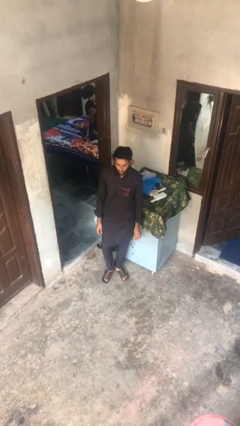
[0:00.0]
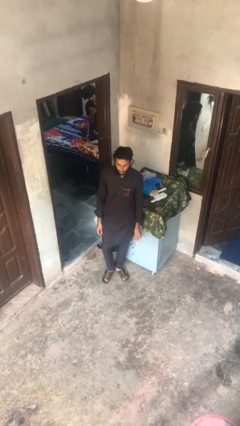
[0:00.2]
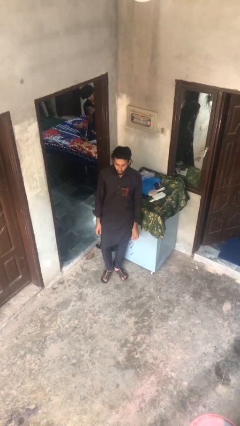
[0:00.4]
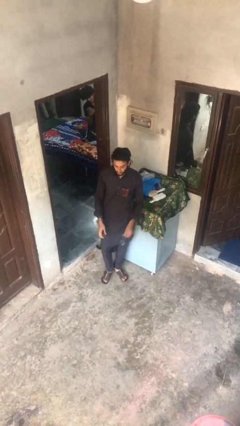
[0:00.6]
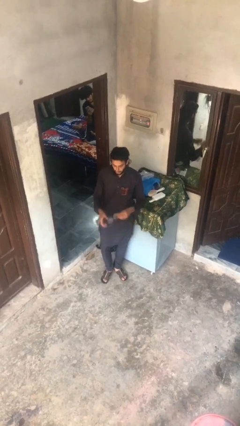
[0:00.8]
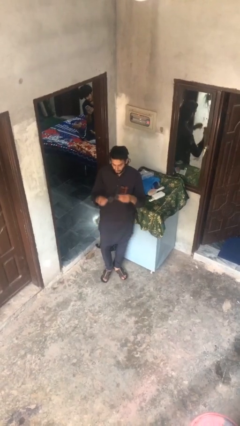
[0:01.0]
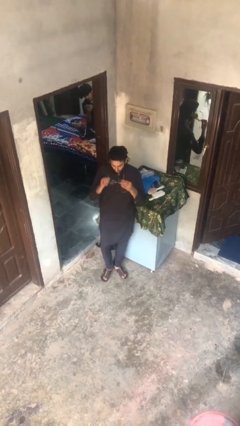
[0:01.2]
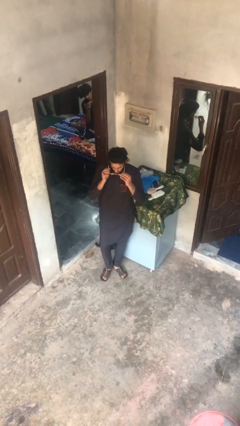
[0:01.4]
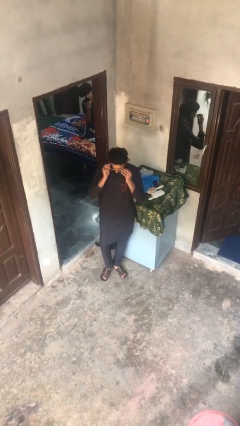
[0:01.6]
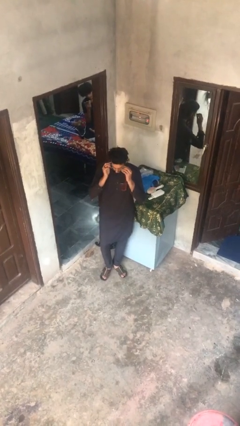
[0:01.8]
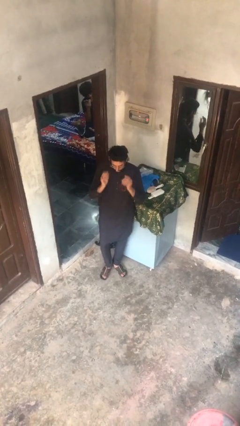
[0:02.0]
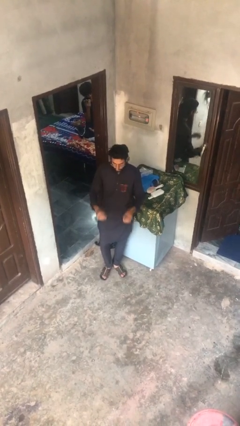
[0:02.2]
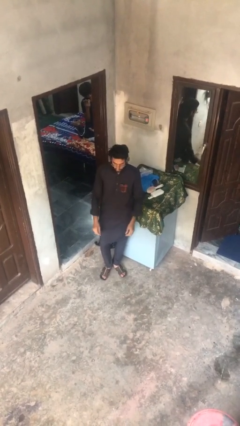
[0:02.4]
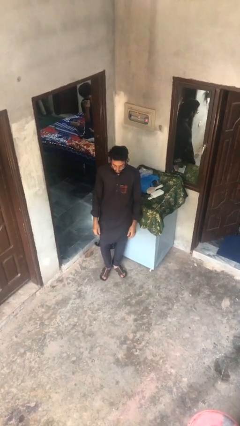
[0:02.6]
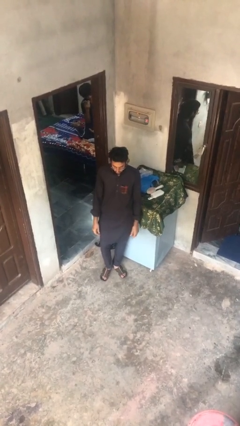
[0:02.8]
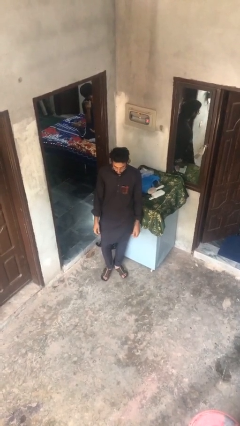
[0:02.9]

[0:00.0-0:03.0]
person puts on glasses

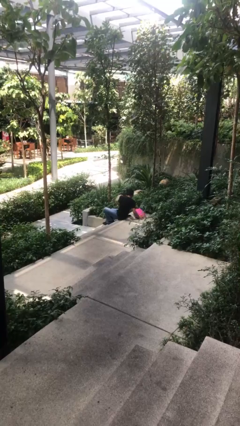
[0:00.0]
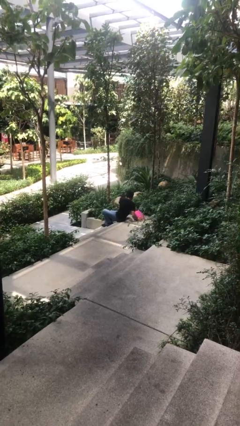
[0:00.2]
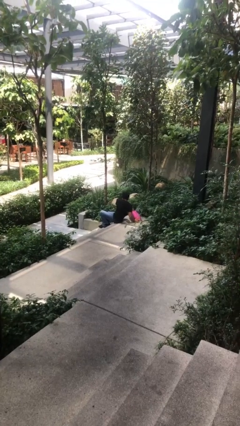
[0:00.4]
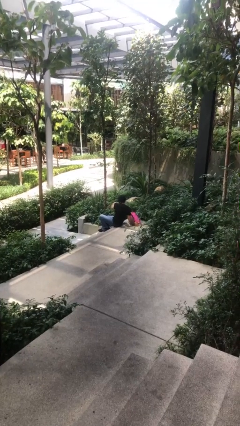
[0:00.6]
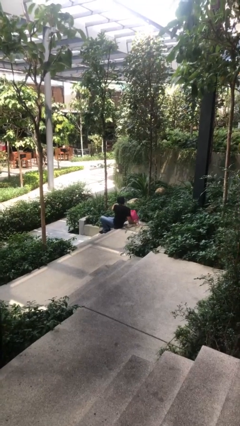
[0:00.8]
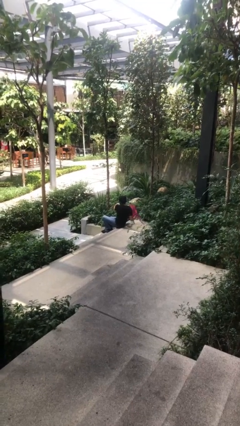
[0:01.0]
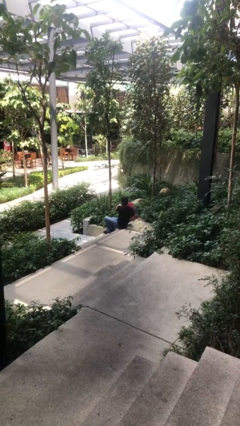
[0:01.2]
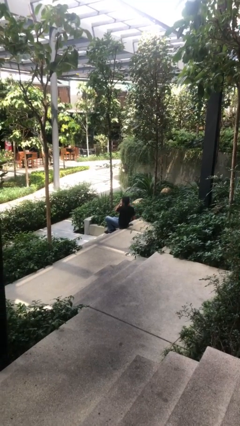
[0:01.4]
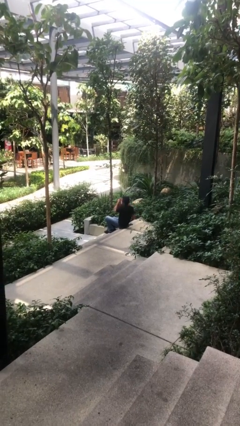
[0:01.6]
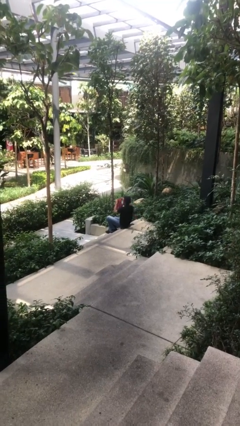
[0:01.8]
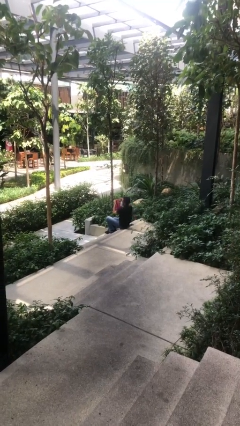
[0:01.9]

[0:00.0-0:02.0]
person picks up object from floor

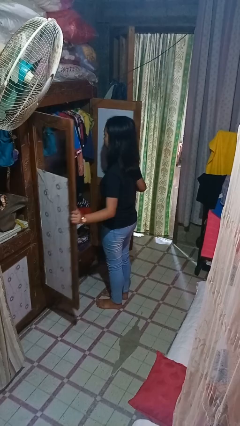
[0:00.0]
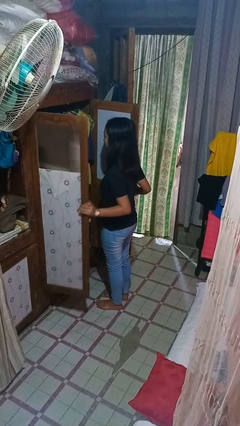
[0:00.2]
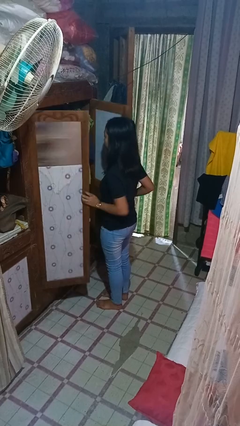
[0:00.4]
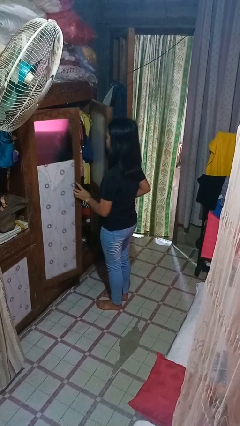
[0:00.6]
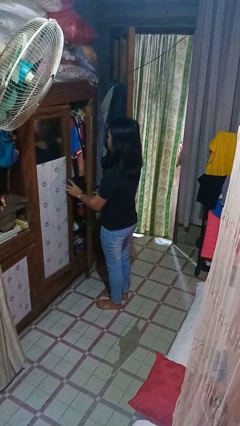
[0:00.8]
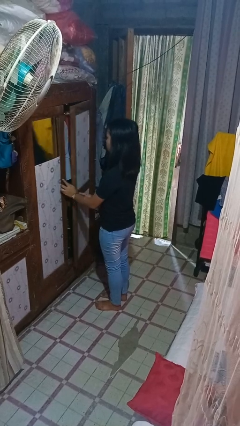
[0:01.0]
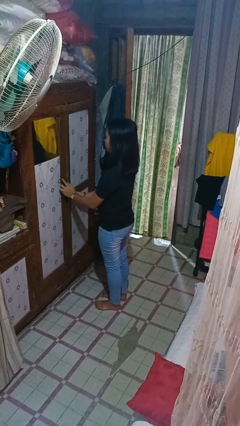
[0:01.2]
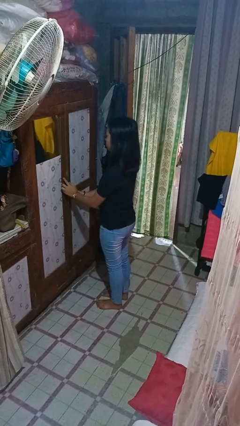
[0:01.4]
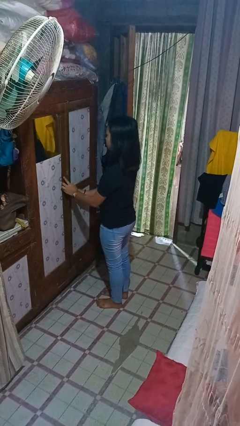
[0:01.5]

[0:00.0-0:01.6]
person closes closet door

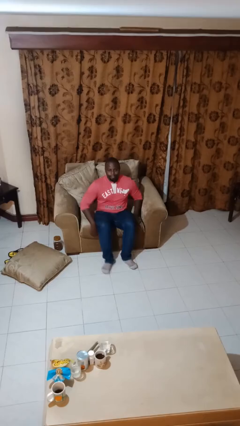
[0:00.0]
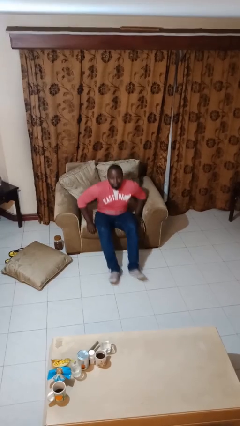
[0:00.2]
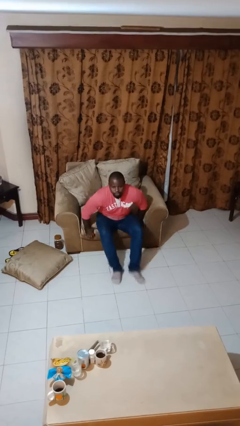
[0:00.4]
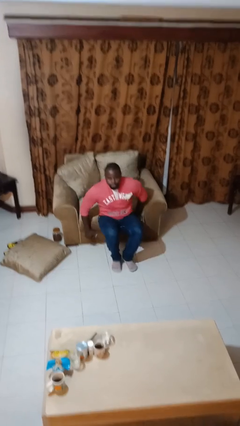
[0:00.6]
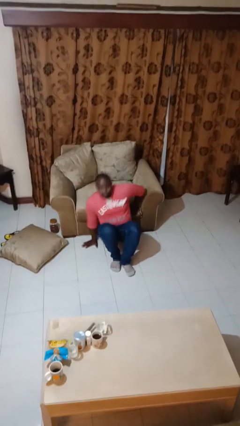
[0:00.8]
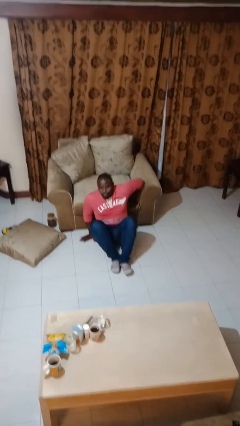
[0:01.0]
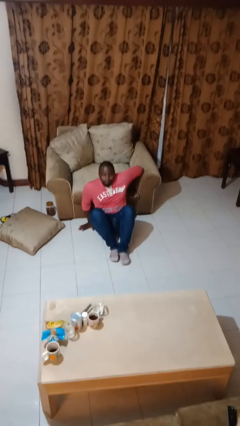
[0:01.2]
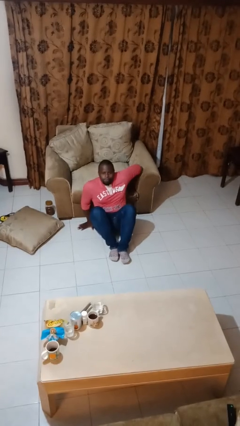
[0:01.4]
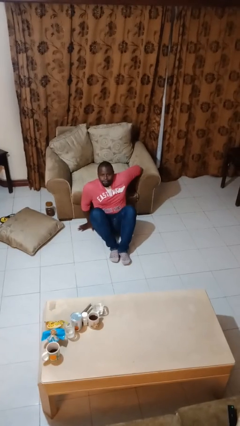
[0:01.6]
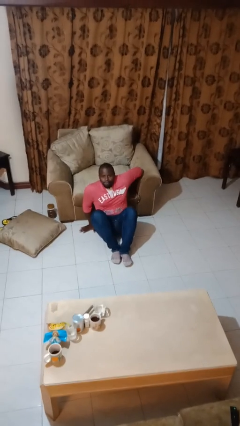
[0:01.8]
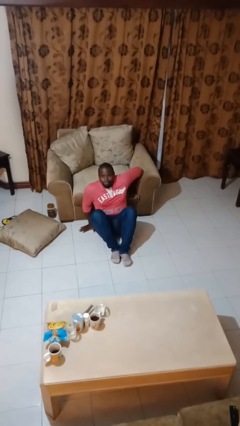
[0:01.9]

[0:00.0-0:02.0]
person falls from chair

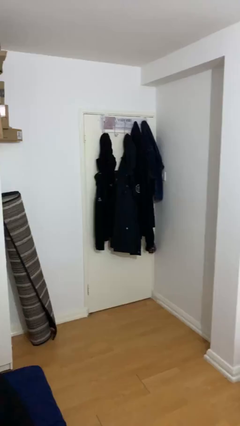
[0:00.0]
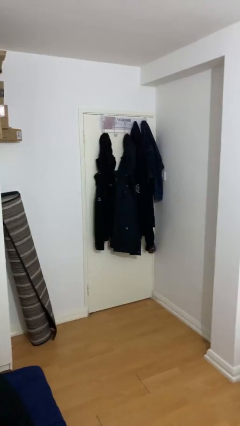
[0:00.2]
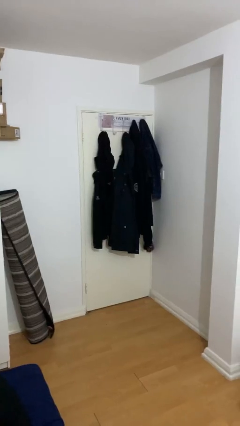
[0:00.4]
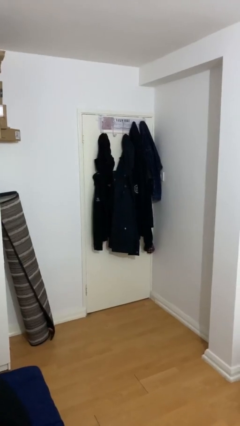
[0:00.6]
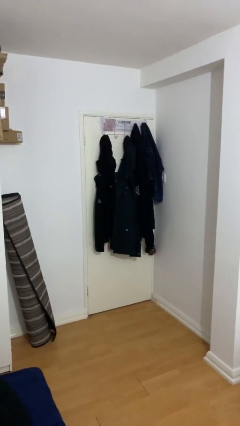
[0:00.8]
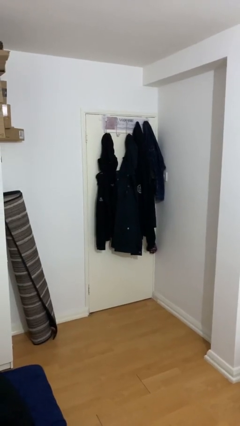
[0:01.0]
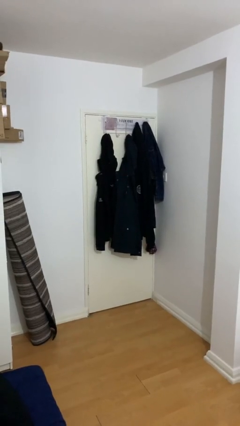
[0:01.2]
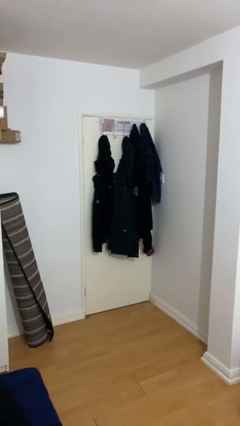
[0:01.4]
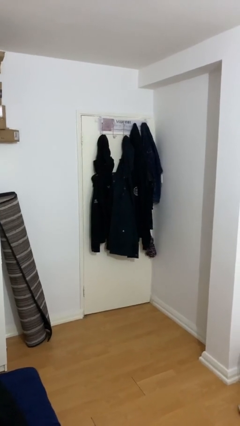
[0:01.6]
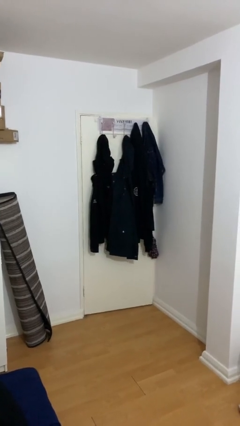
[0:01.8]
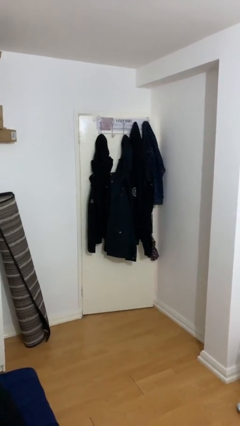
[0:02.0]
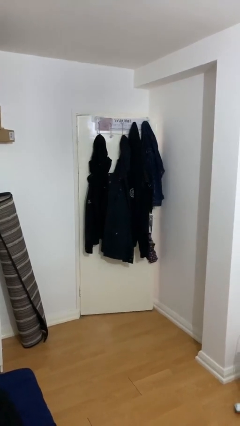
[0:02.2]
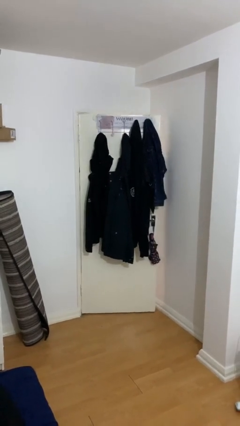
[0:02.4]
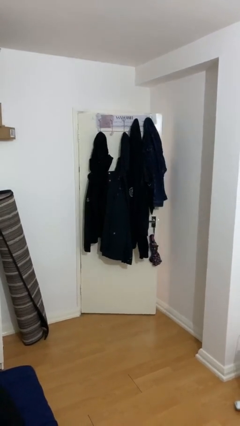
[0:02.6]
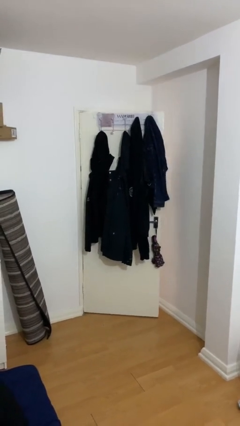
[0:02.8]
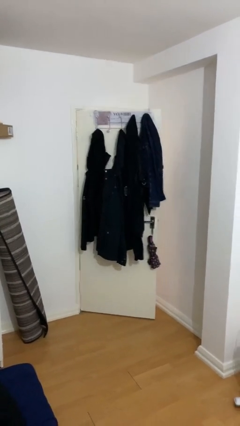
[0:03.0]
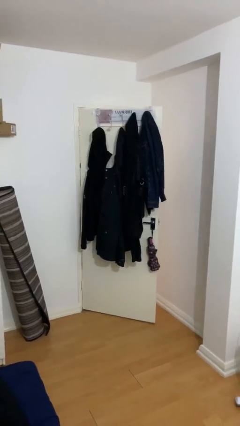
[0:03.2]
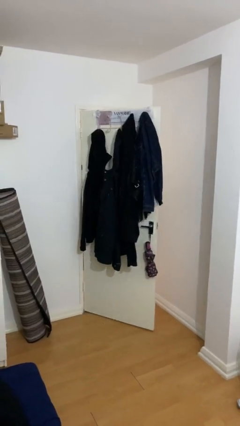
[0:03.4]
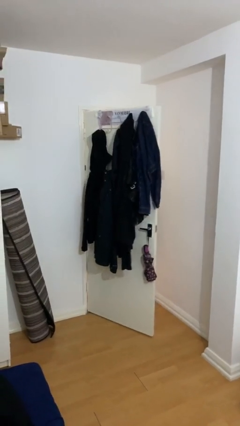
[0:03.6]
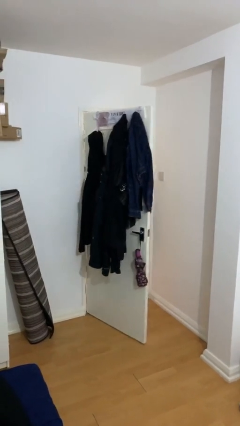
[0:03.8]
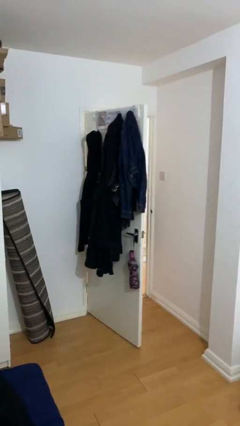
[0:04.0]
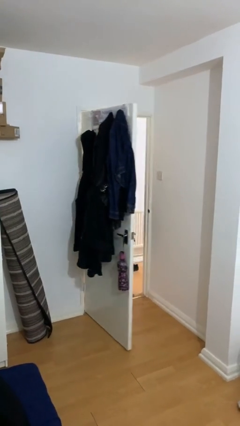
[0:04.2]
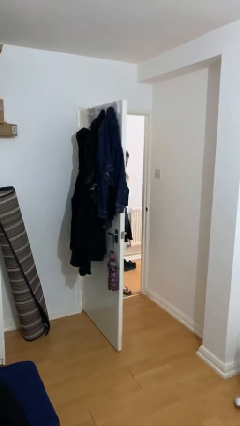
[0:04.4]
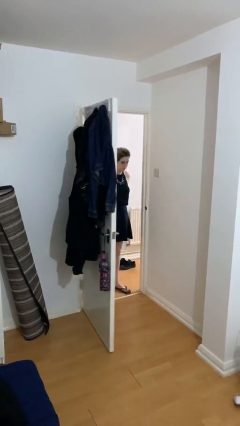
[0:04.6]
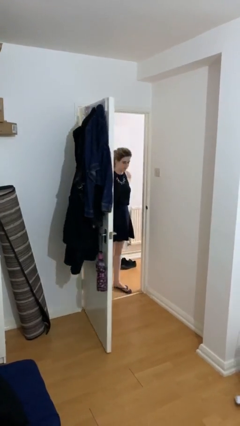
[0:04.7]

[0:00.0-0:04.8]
person opens facility door

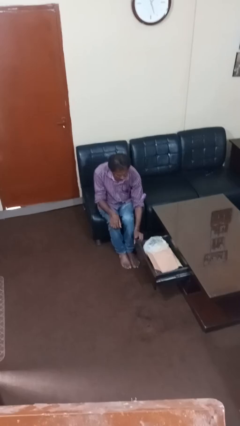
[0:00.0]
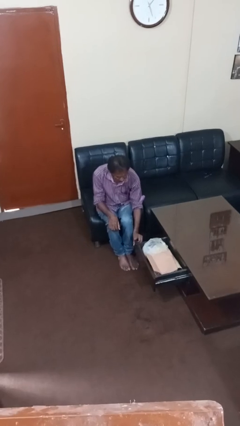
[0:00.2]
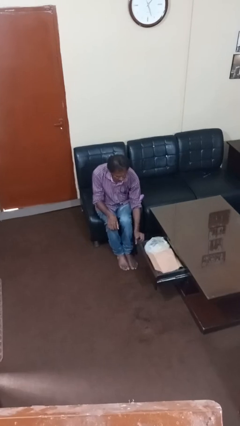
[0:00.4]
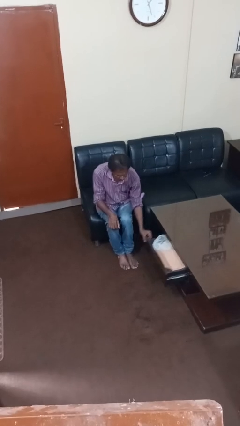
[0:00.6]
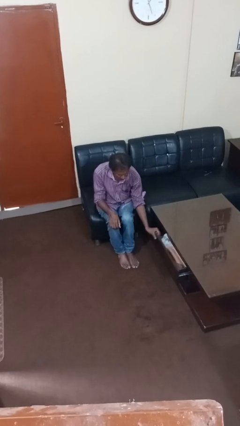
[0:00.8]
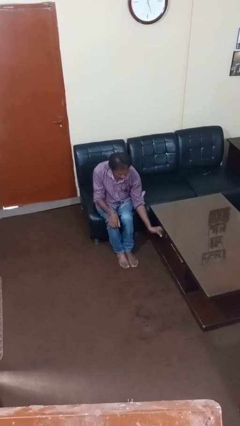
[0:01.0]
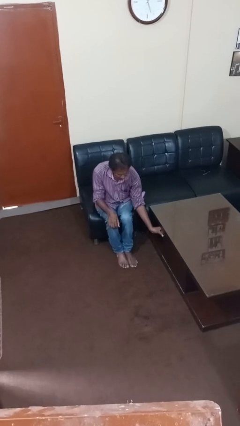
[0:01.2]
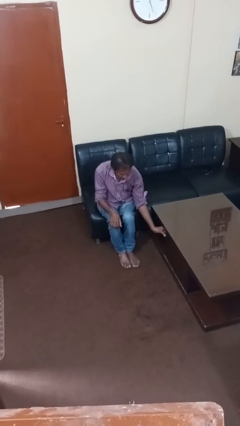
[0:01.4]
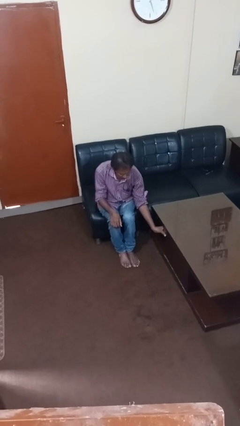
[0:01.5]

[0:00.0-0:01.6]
person closes dresser drawer

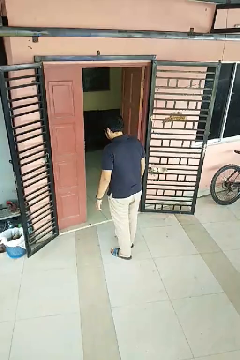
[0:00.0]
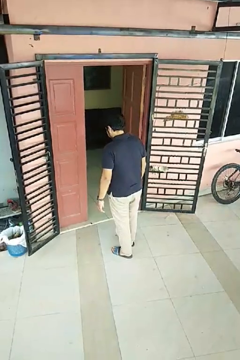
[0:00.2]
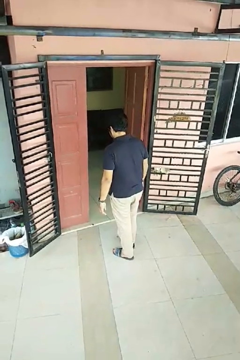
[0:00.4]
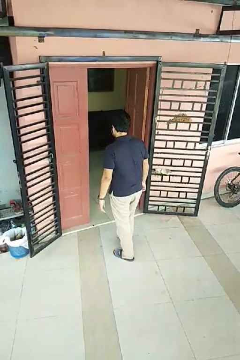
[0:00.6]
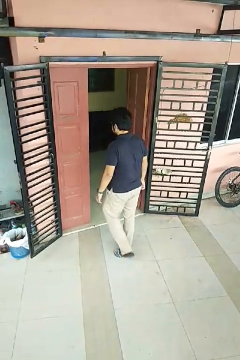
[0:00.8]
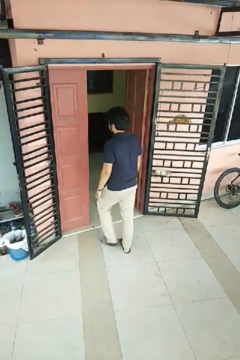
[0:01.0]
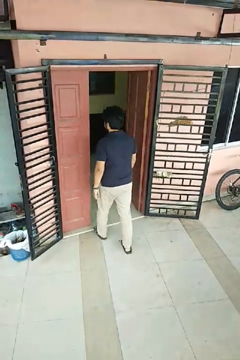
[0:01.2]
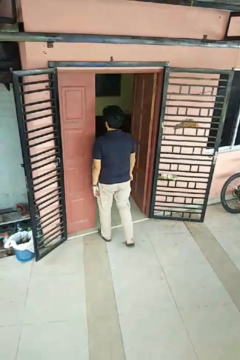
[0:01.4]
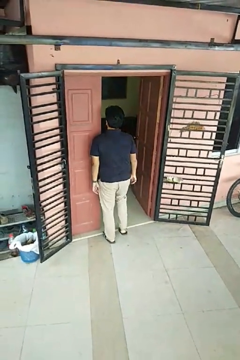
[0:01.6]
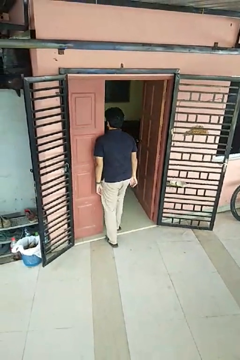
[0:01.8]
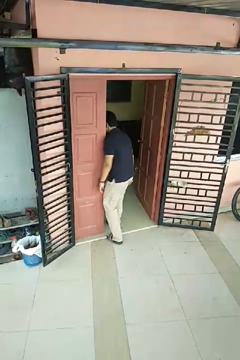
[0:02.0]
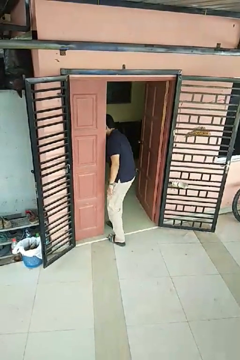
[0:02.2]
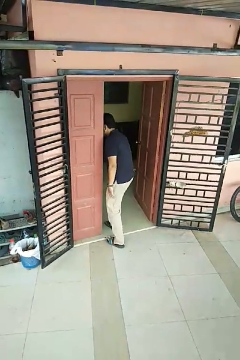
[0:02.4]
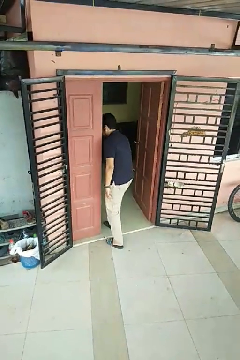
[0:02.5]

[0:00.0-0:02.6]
person bumps into wall
